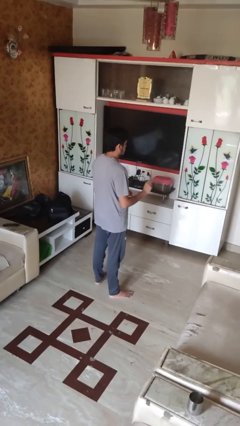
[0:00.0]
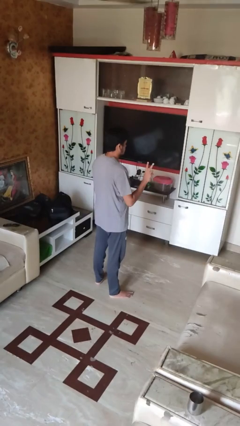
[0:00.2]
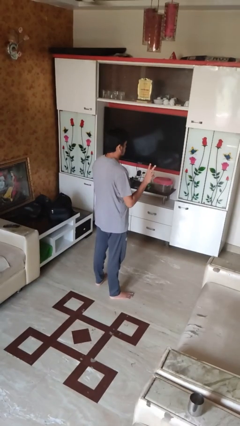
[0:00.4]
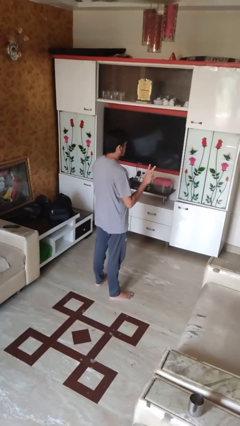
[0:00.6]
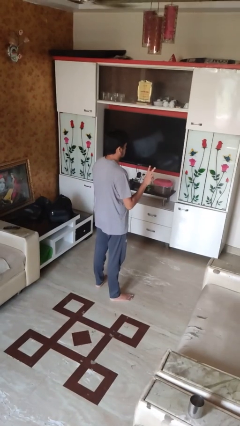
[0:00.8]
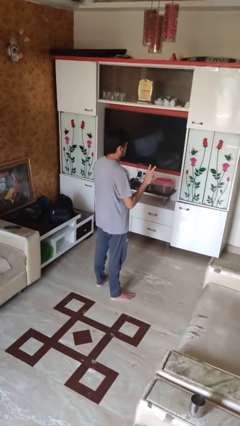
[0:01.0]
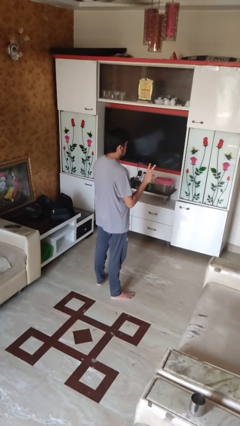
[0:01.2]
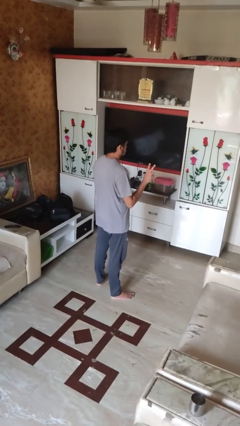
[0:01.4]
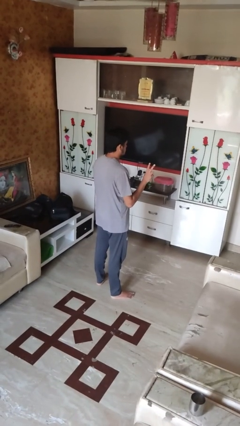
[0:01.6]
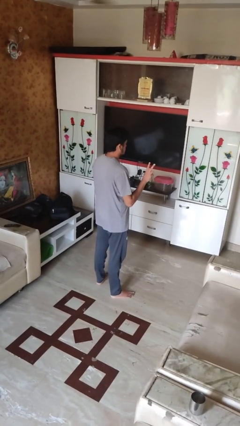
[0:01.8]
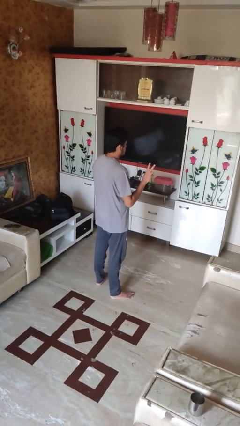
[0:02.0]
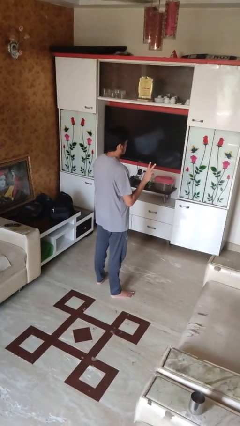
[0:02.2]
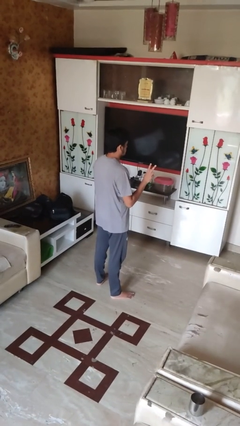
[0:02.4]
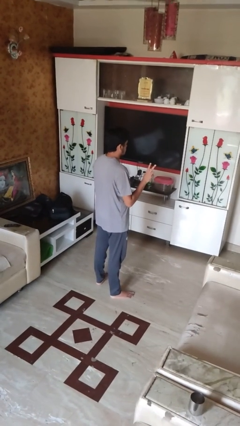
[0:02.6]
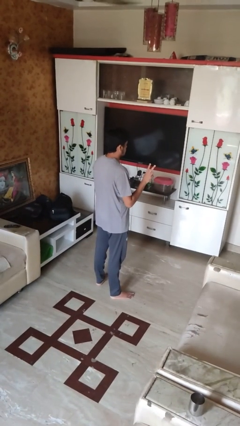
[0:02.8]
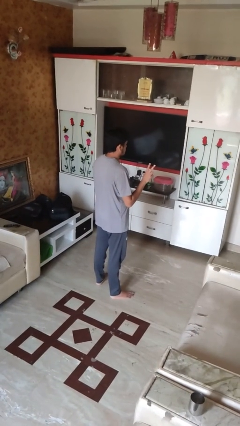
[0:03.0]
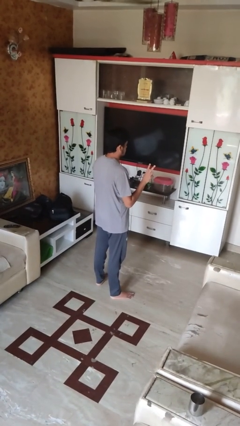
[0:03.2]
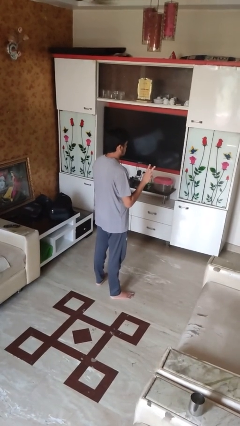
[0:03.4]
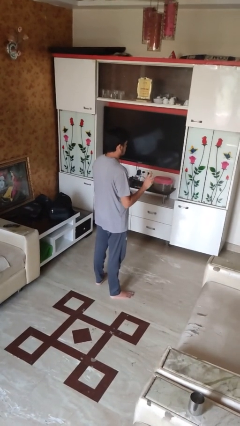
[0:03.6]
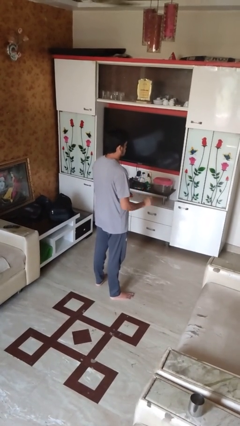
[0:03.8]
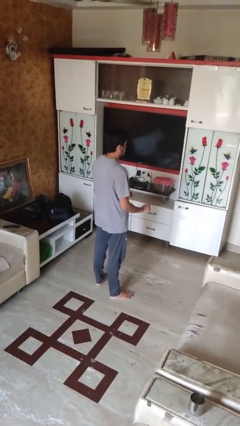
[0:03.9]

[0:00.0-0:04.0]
person gestures peace

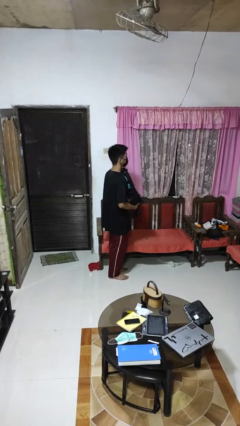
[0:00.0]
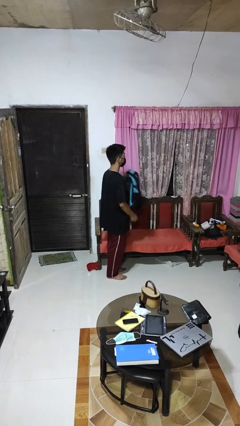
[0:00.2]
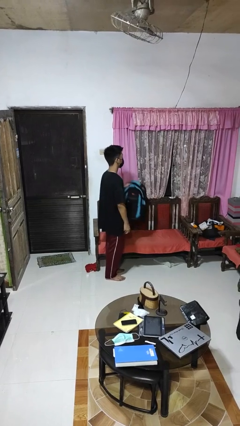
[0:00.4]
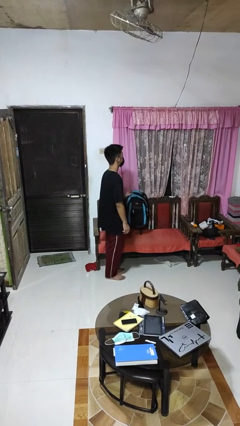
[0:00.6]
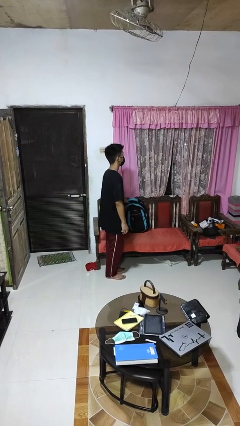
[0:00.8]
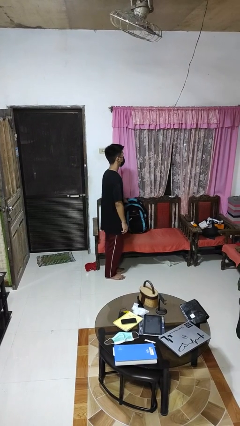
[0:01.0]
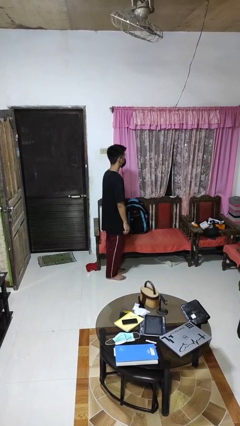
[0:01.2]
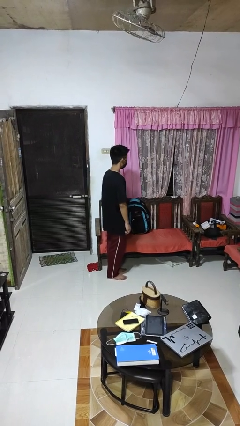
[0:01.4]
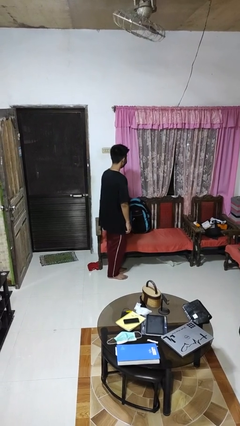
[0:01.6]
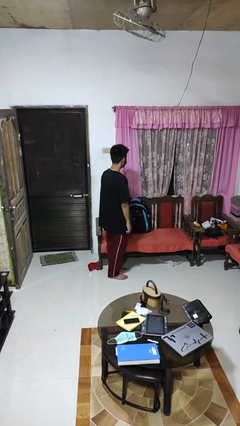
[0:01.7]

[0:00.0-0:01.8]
person puts down object on couch

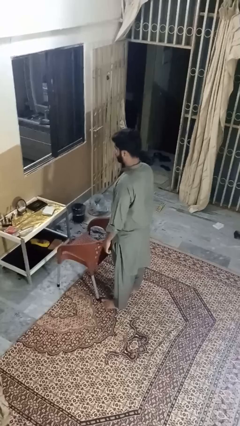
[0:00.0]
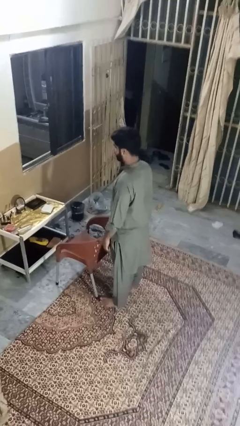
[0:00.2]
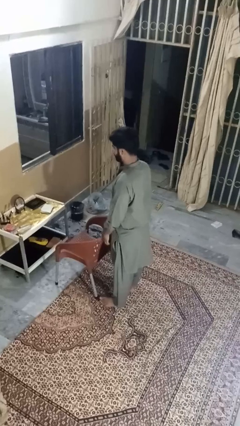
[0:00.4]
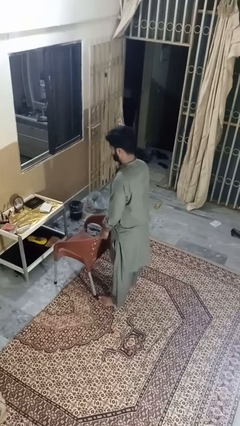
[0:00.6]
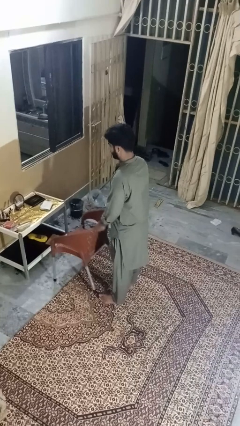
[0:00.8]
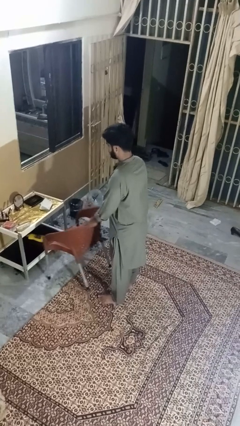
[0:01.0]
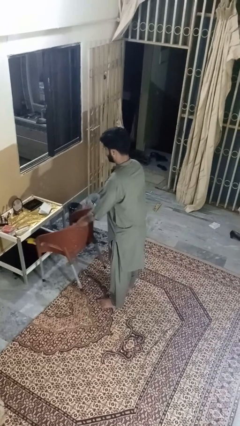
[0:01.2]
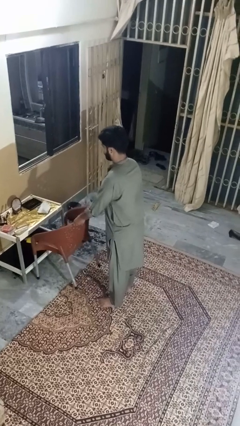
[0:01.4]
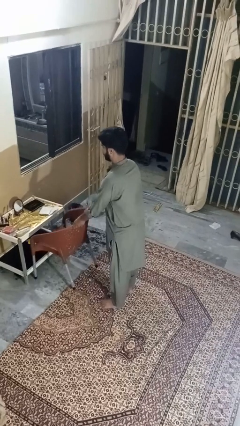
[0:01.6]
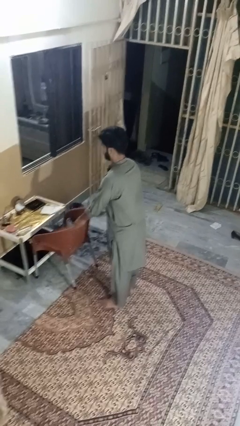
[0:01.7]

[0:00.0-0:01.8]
person pushes in chair

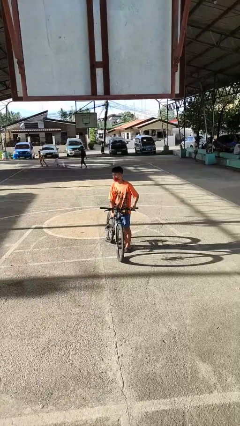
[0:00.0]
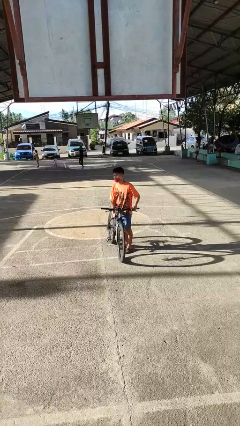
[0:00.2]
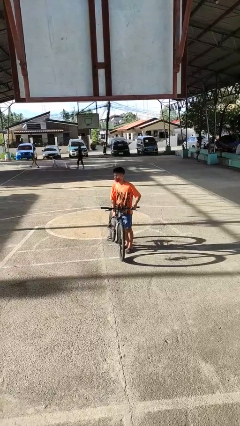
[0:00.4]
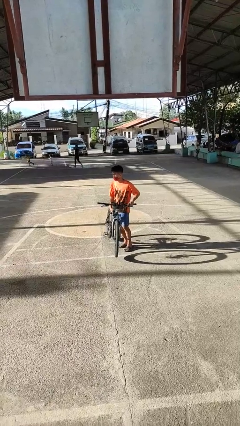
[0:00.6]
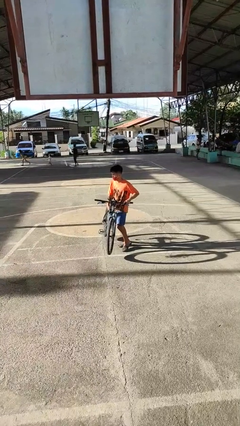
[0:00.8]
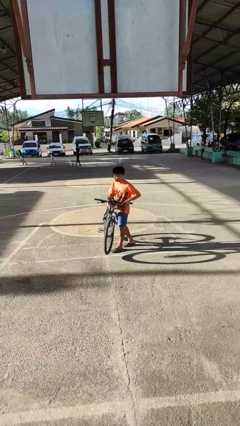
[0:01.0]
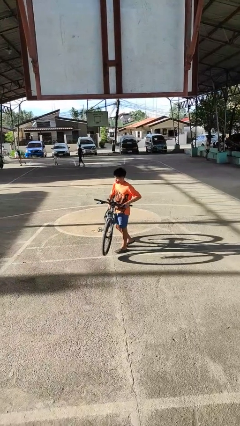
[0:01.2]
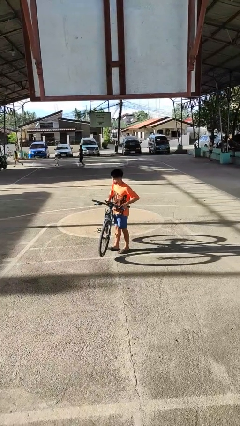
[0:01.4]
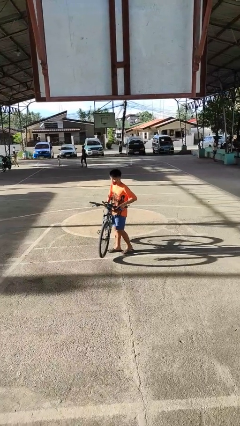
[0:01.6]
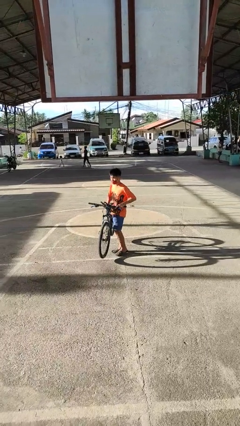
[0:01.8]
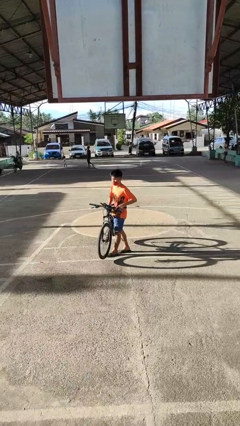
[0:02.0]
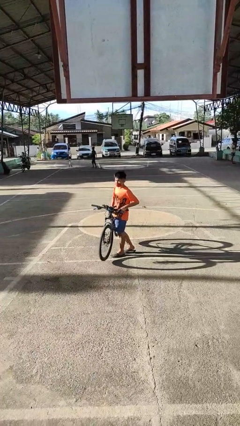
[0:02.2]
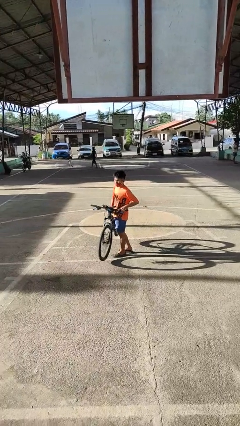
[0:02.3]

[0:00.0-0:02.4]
person carries bicycle

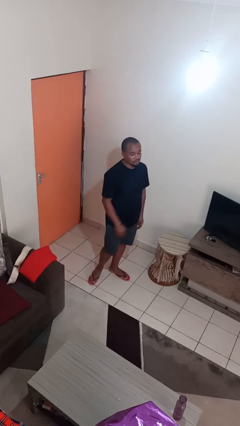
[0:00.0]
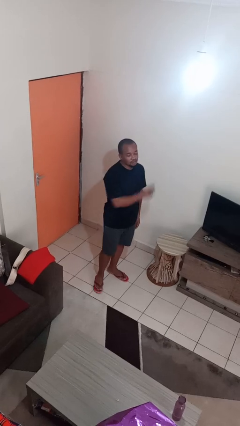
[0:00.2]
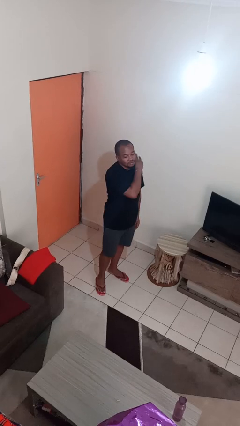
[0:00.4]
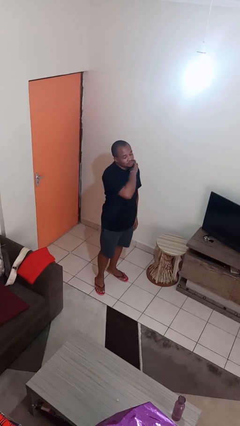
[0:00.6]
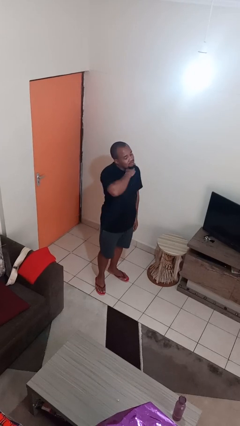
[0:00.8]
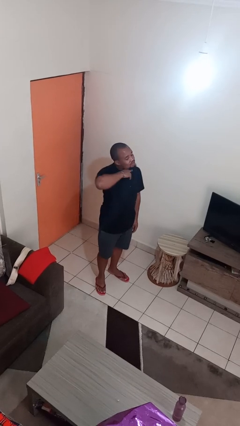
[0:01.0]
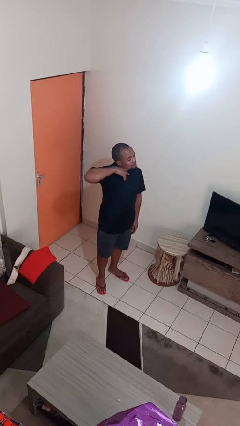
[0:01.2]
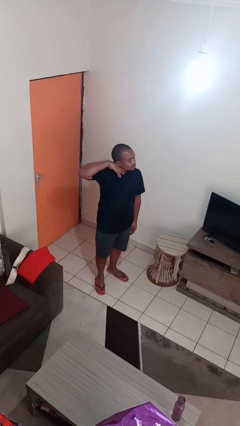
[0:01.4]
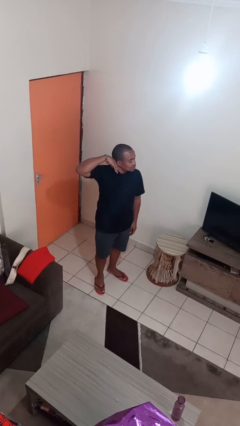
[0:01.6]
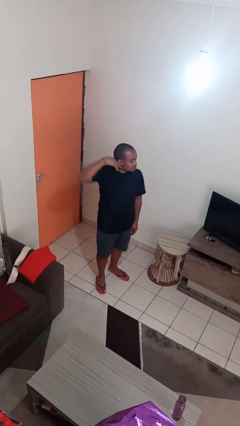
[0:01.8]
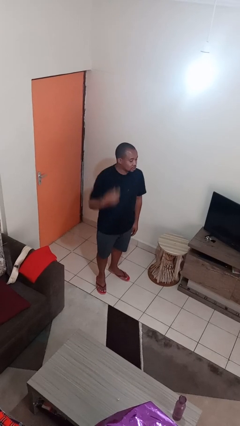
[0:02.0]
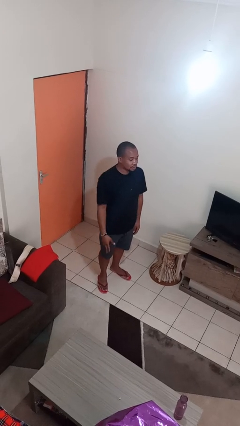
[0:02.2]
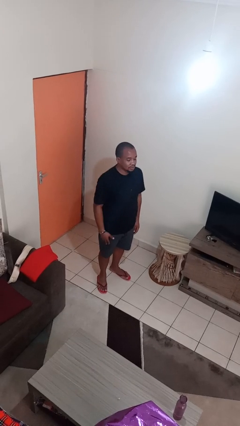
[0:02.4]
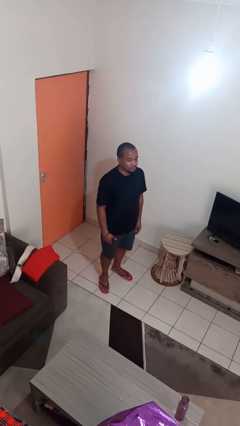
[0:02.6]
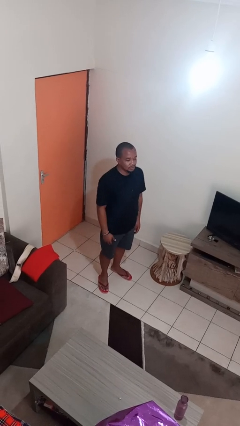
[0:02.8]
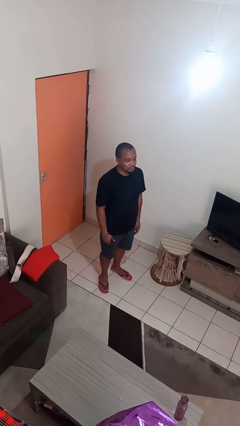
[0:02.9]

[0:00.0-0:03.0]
person gestures cut

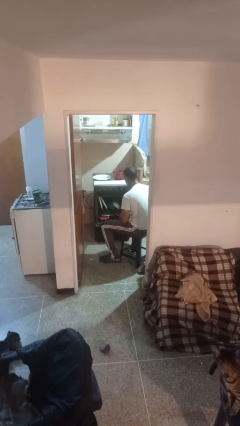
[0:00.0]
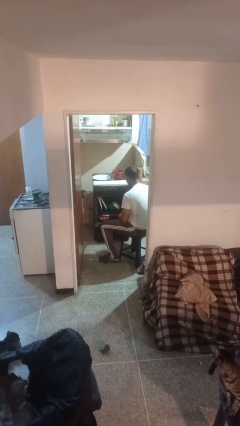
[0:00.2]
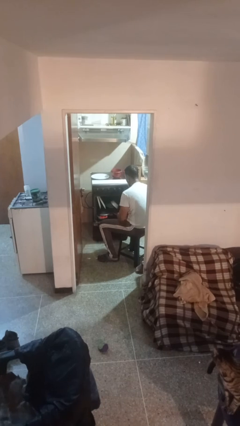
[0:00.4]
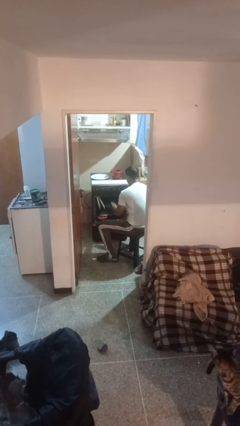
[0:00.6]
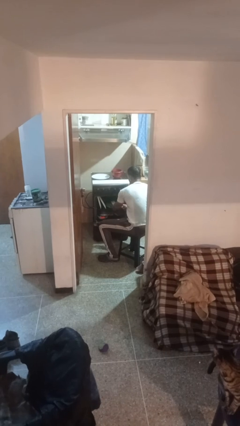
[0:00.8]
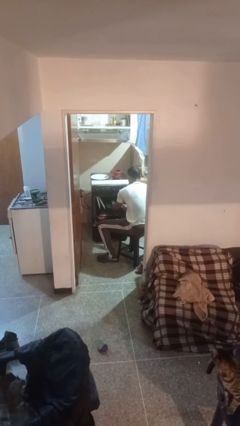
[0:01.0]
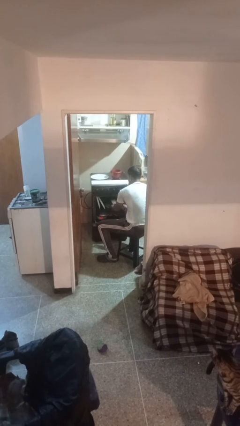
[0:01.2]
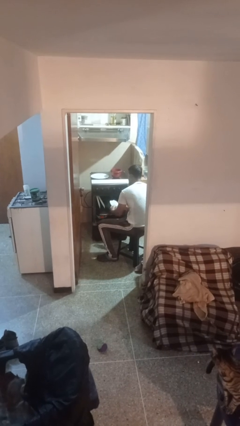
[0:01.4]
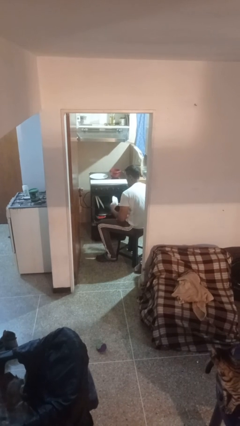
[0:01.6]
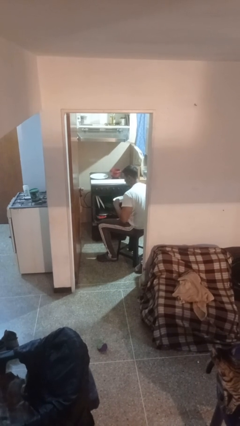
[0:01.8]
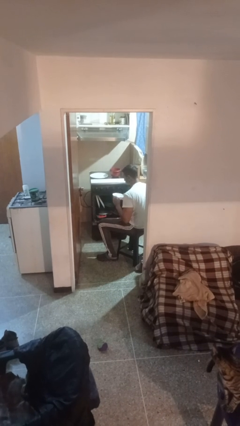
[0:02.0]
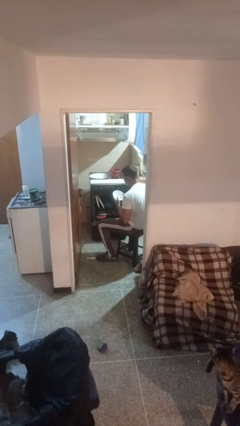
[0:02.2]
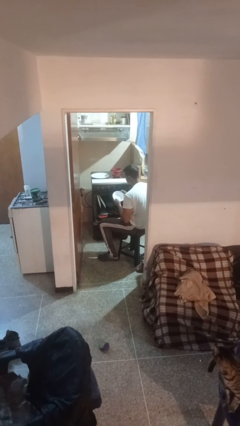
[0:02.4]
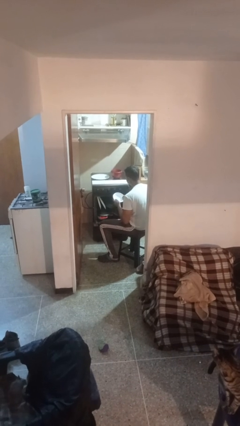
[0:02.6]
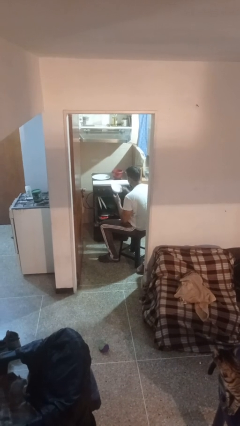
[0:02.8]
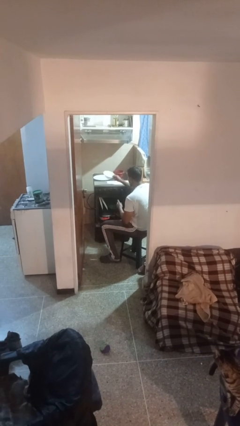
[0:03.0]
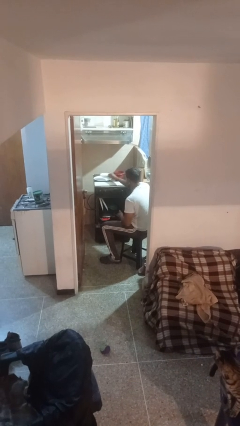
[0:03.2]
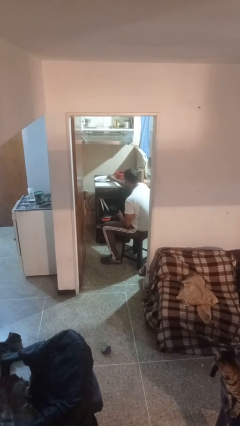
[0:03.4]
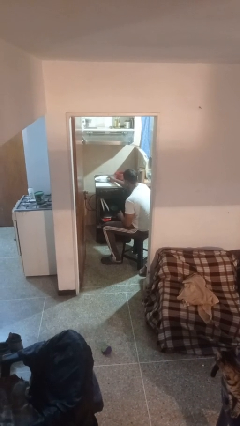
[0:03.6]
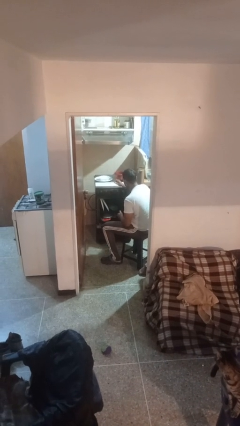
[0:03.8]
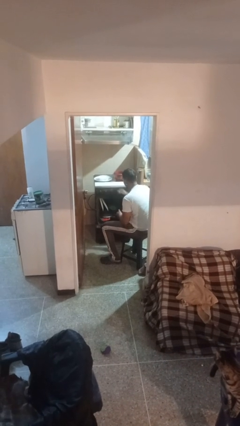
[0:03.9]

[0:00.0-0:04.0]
person unloads dishwasher

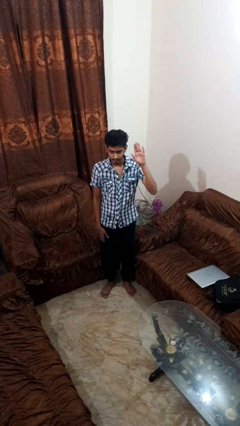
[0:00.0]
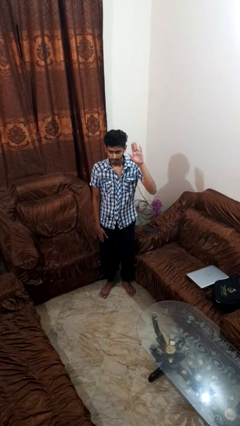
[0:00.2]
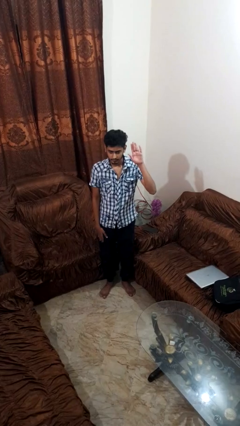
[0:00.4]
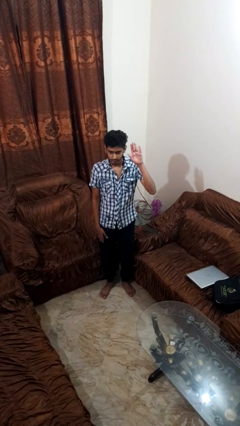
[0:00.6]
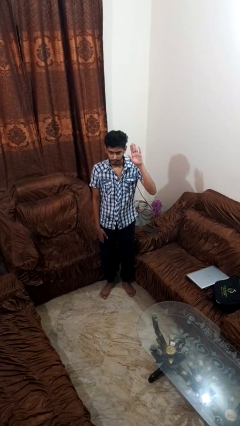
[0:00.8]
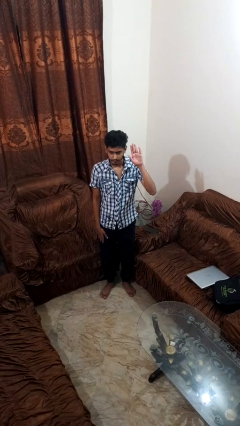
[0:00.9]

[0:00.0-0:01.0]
person gestures raise hand
